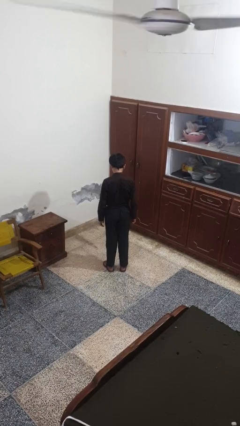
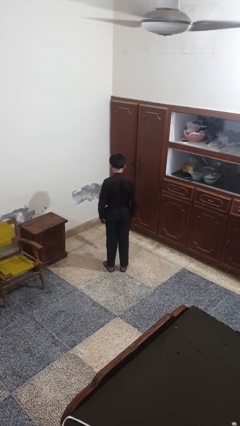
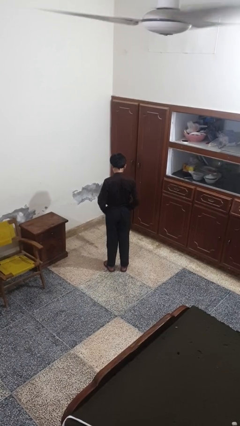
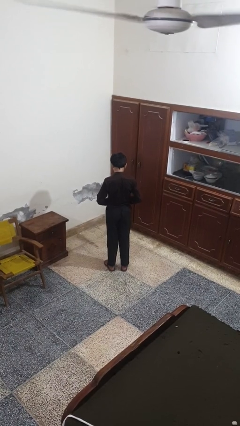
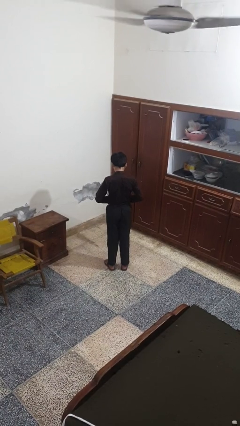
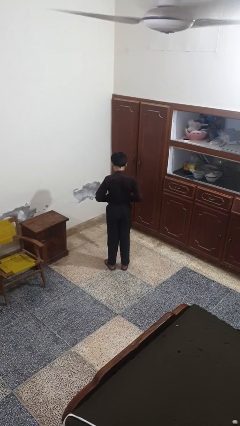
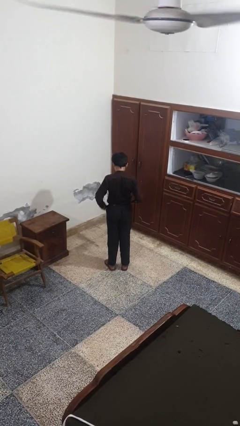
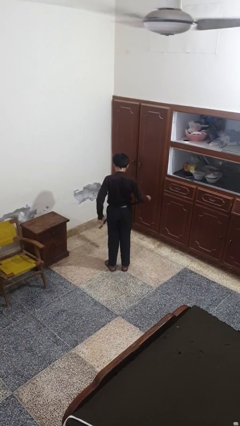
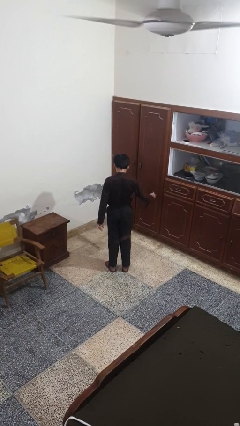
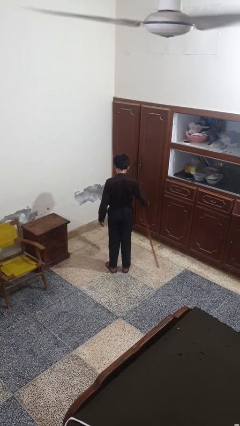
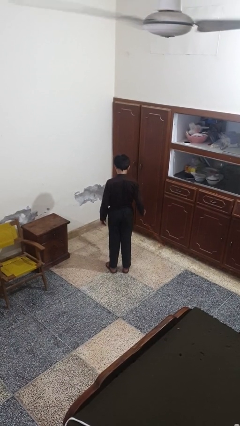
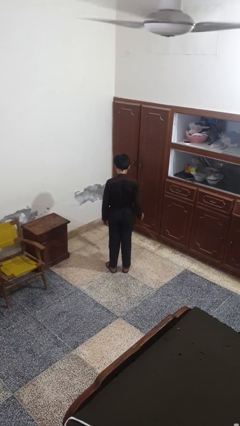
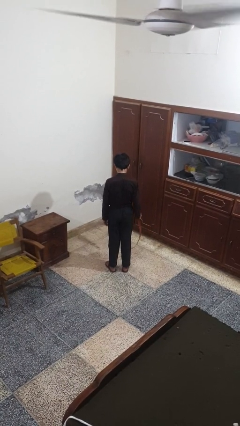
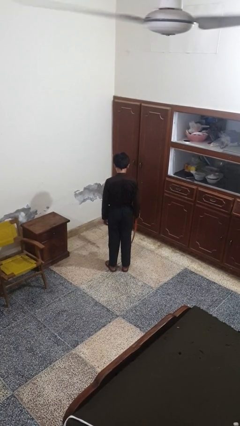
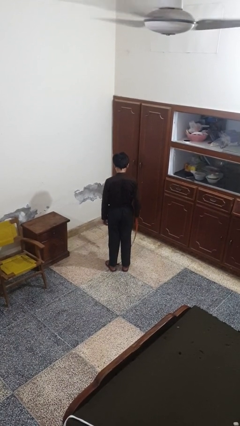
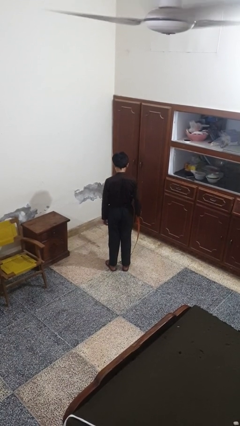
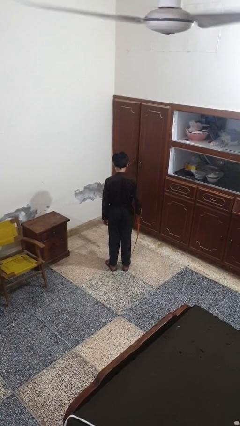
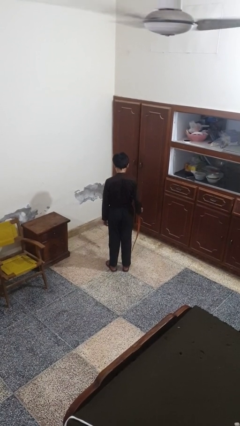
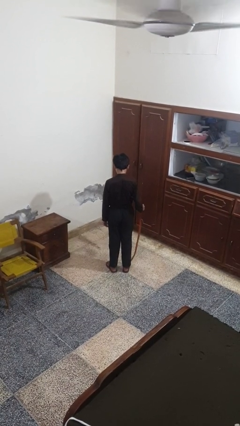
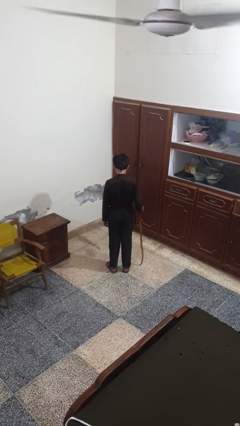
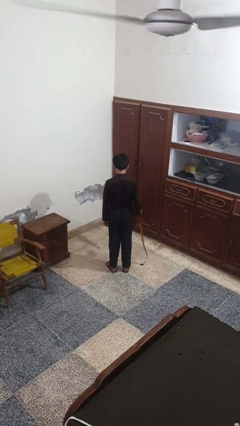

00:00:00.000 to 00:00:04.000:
person takes off belt

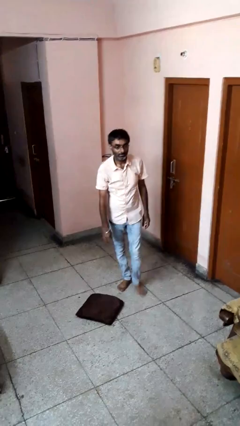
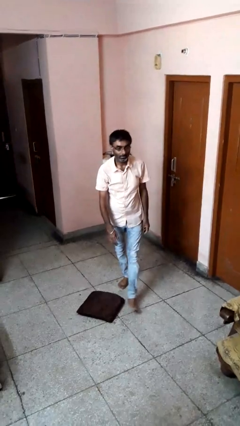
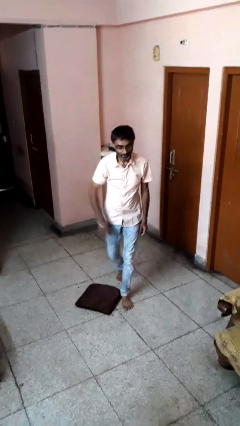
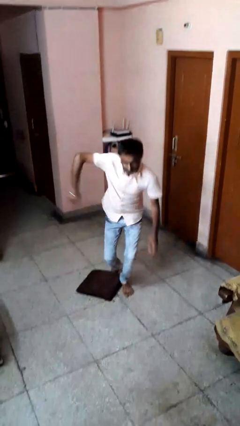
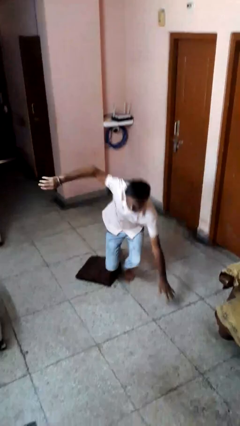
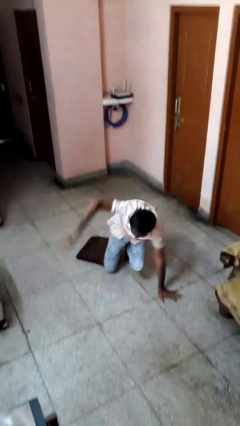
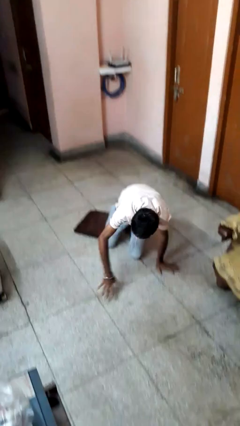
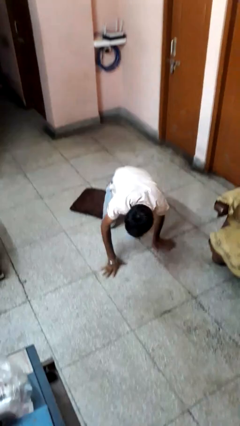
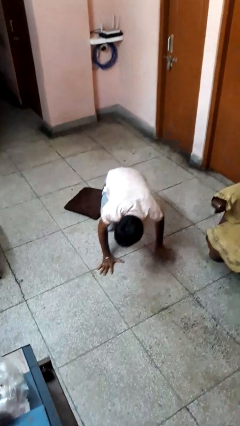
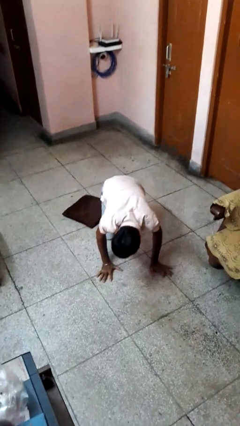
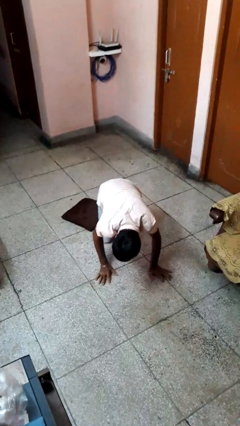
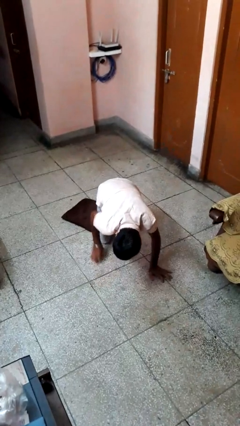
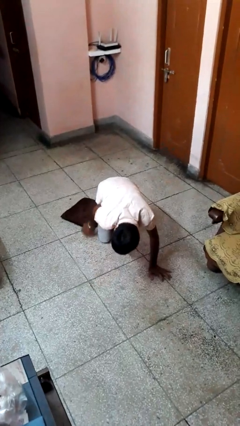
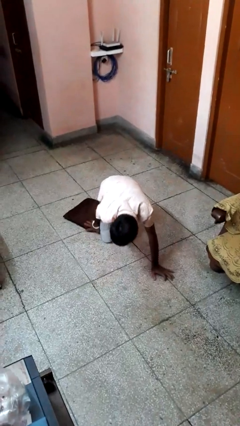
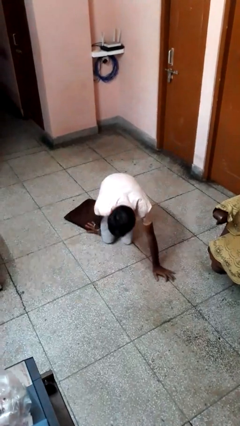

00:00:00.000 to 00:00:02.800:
person trips on object on floor

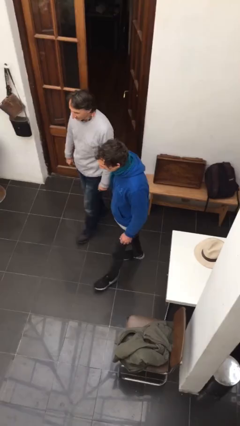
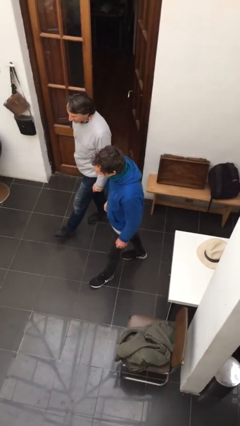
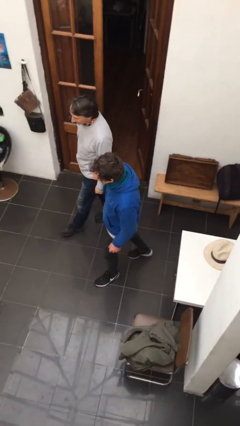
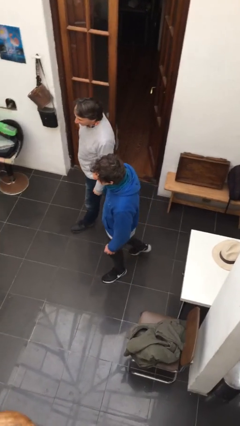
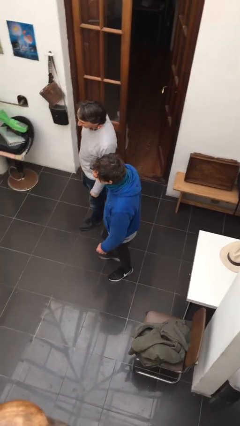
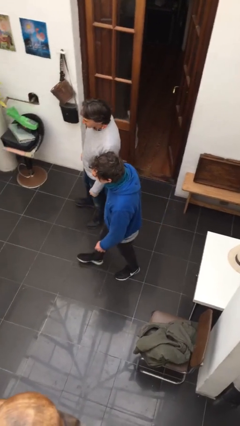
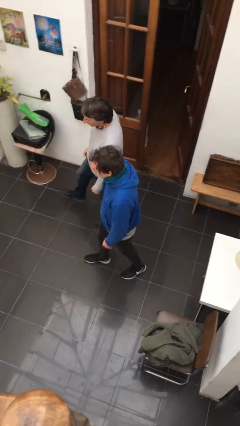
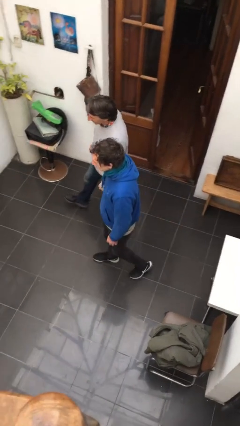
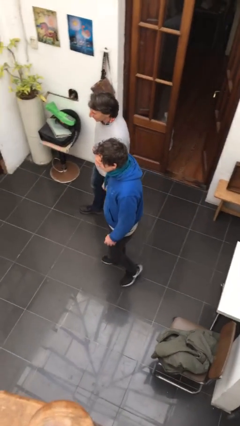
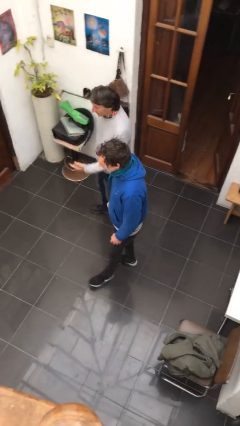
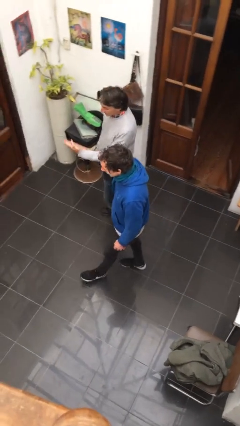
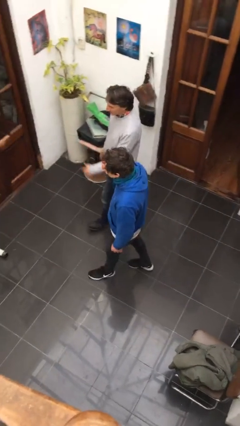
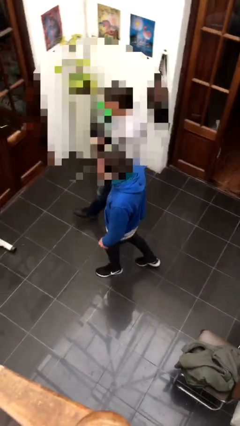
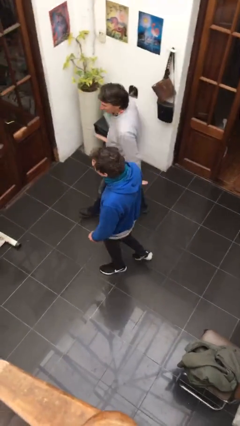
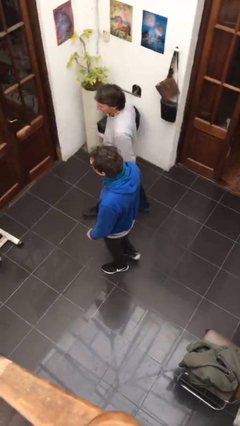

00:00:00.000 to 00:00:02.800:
person talks to person

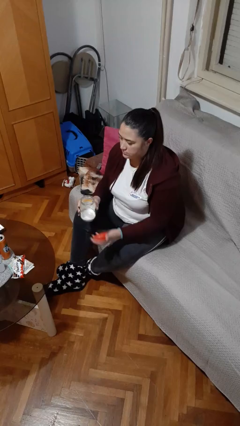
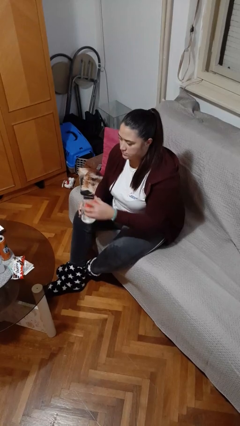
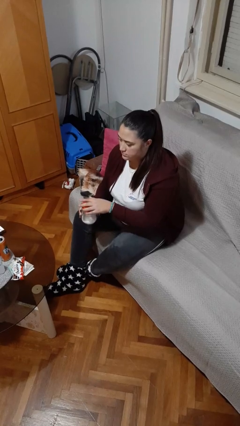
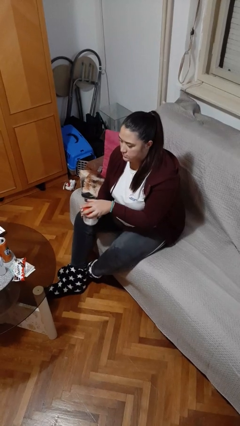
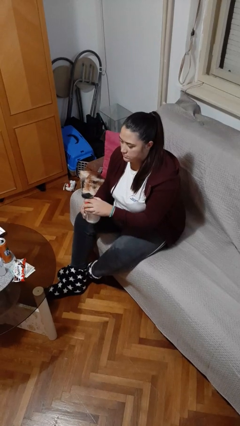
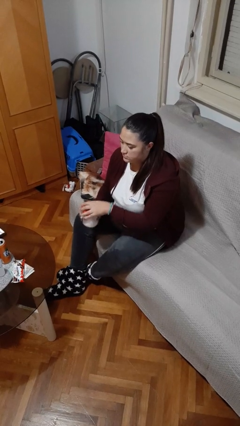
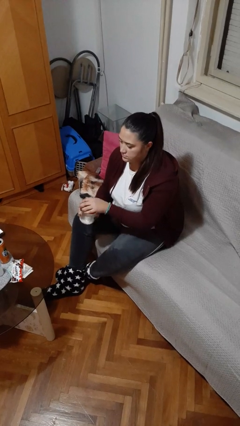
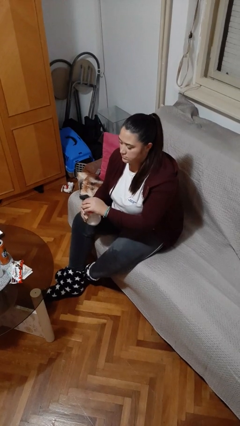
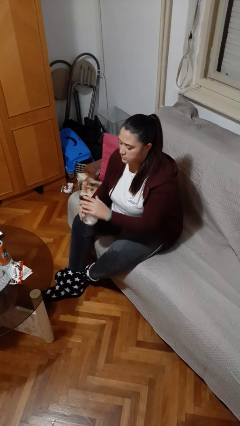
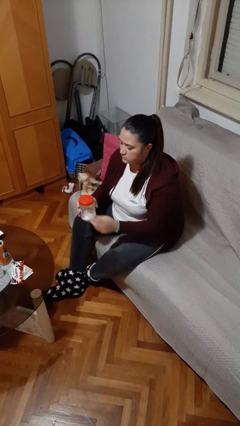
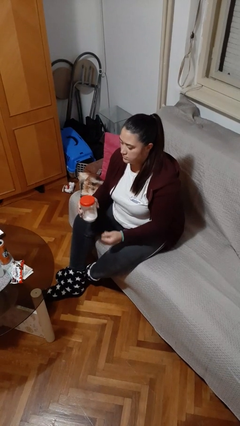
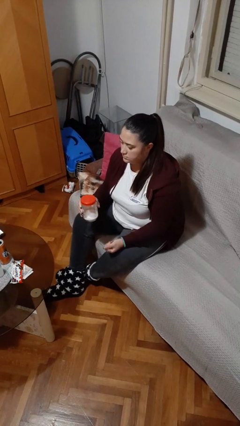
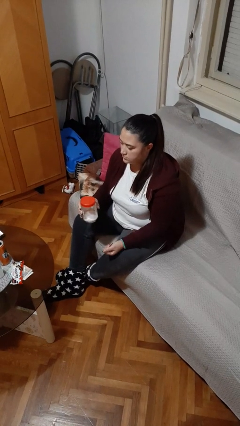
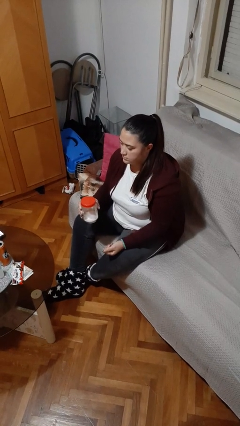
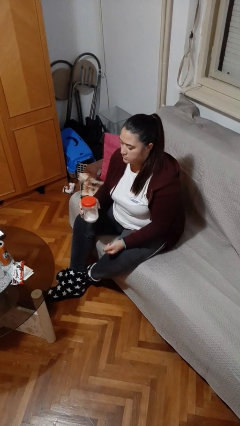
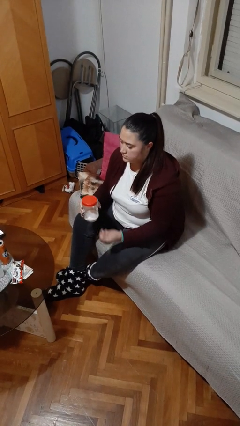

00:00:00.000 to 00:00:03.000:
person closes jar

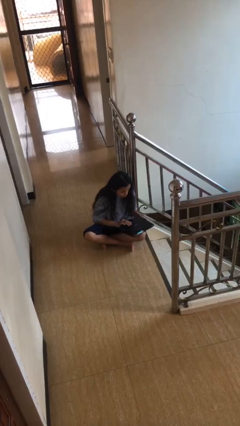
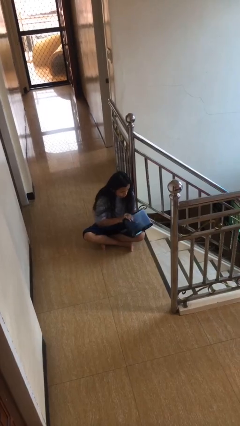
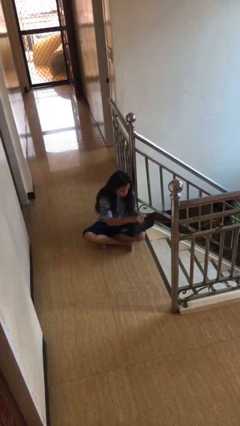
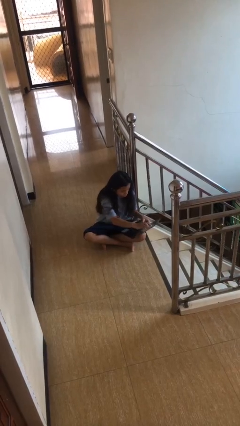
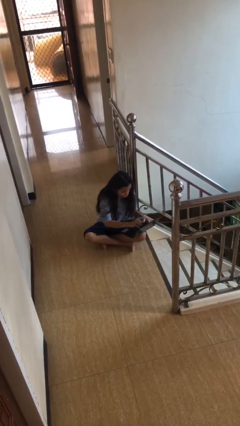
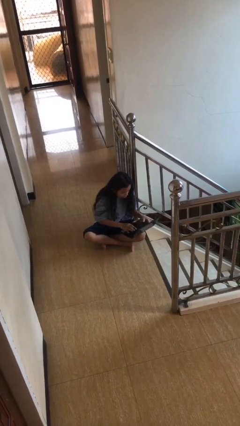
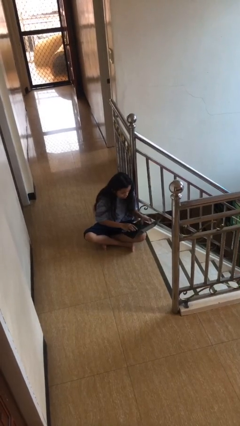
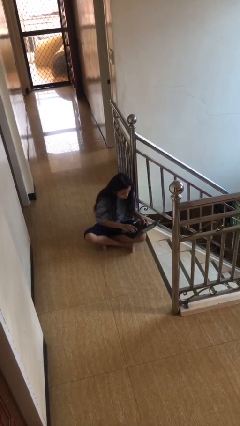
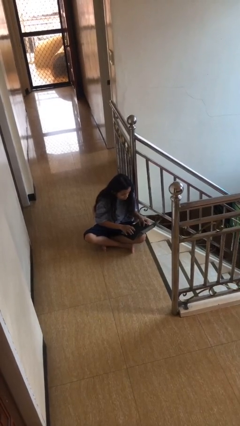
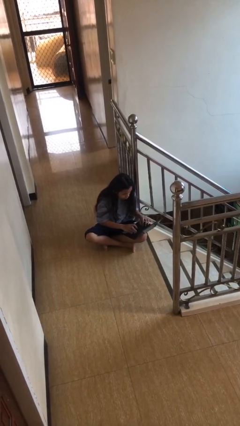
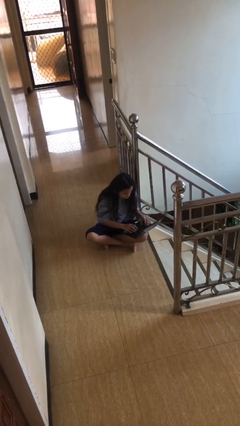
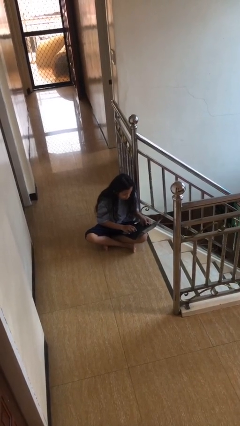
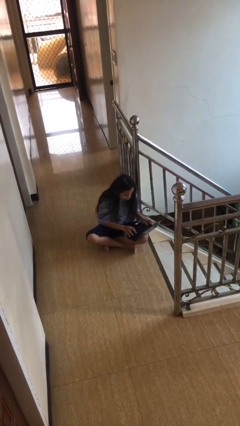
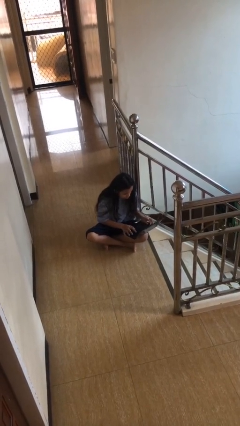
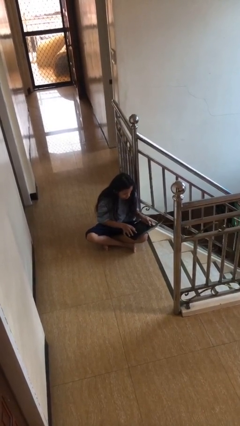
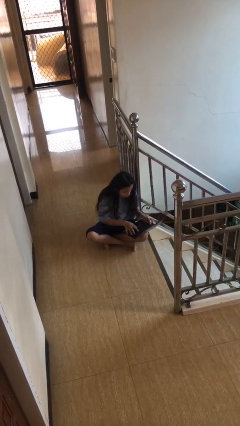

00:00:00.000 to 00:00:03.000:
person interacts with laptop

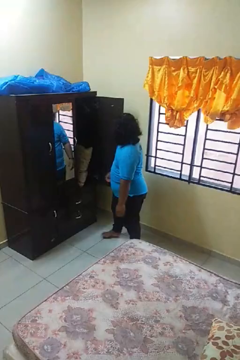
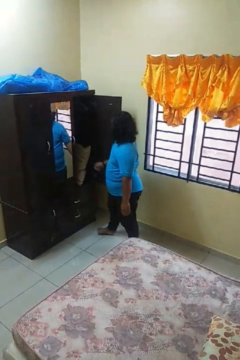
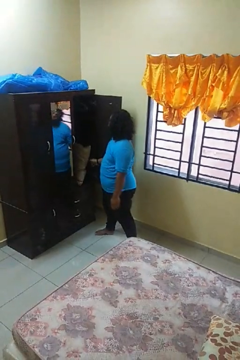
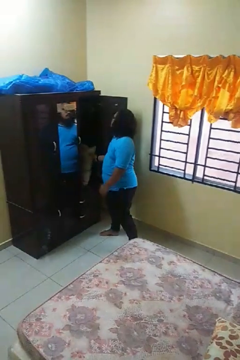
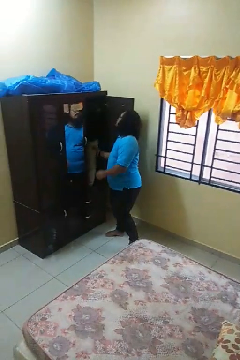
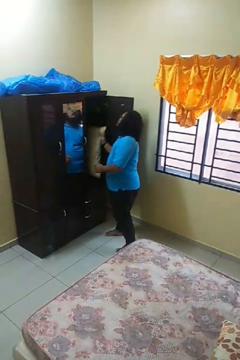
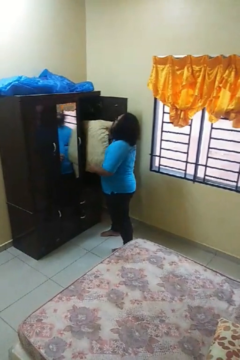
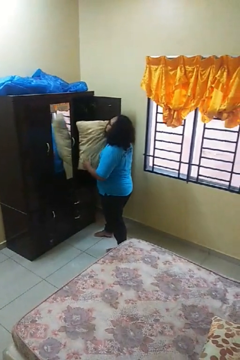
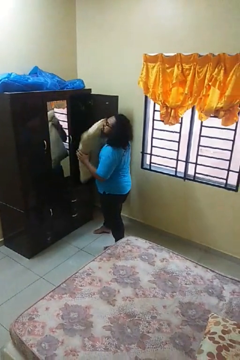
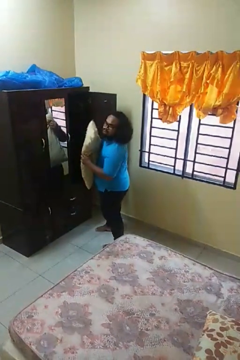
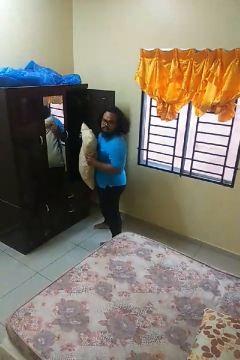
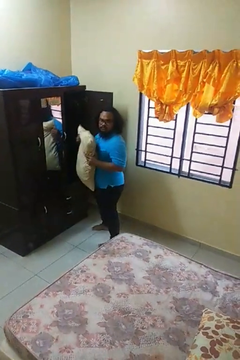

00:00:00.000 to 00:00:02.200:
person picks up object from cabinet
